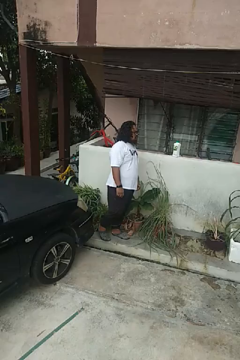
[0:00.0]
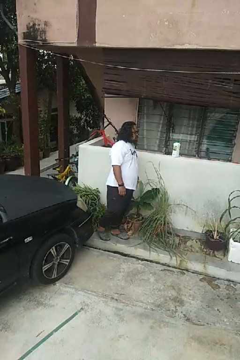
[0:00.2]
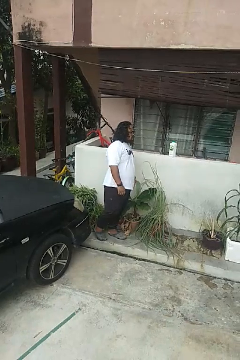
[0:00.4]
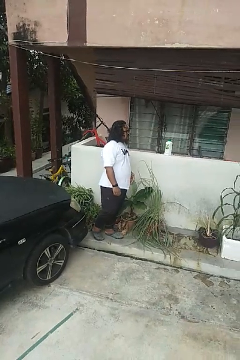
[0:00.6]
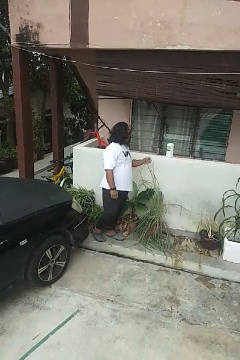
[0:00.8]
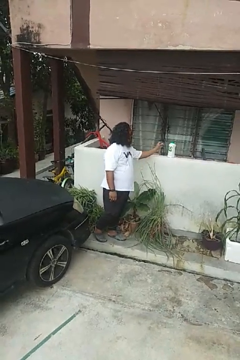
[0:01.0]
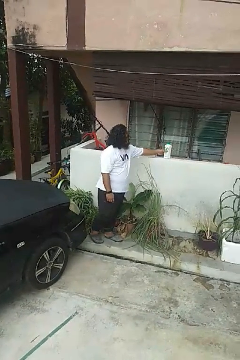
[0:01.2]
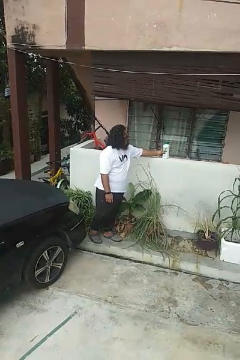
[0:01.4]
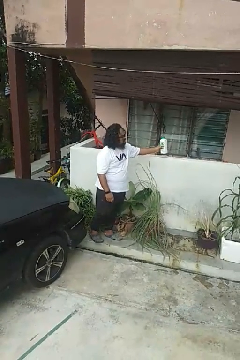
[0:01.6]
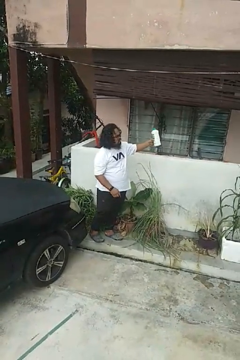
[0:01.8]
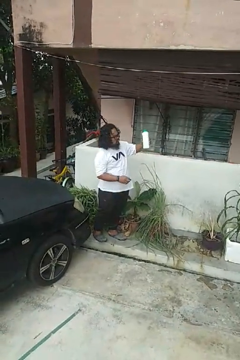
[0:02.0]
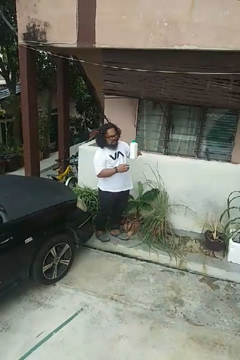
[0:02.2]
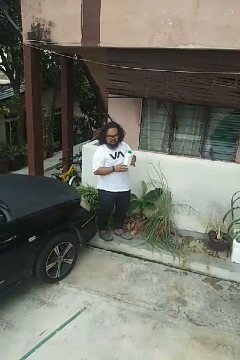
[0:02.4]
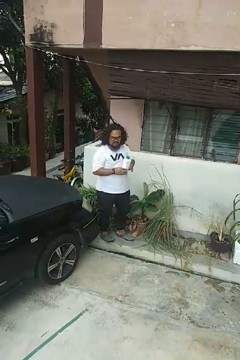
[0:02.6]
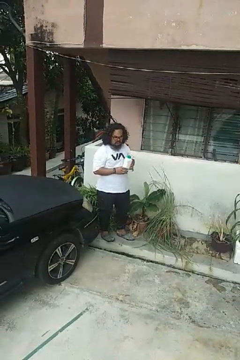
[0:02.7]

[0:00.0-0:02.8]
person picks up object from countertop

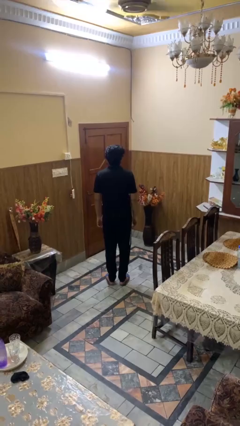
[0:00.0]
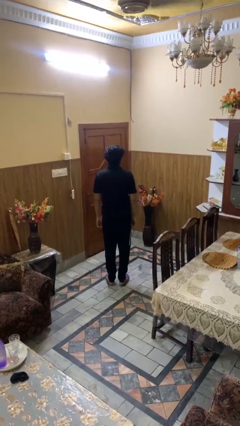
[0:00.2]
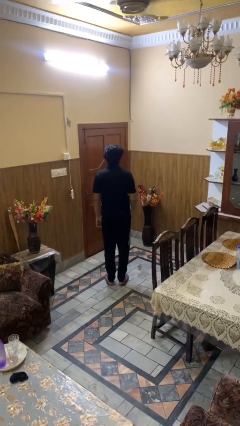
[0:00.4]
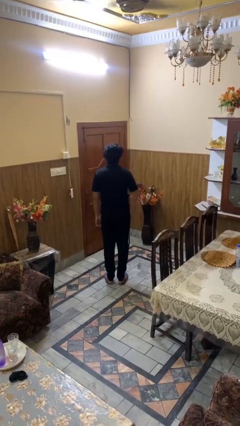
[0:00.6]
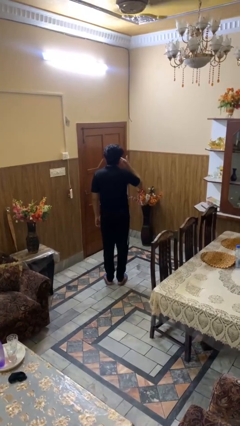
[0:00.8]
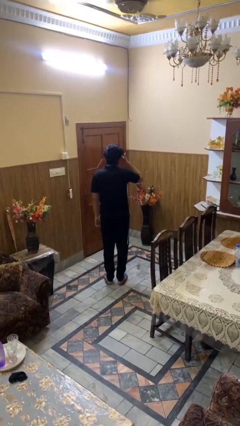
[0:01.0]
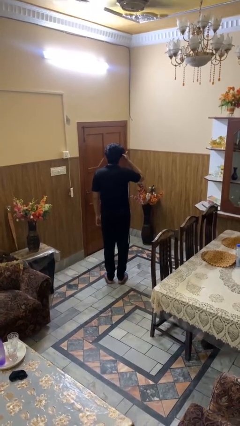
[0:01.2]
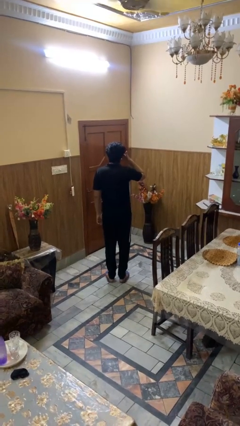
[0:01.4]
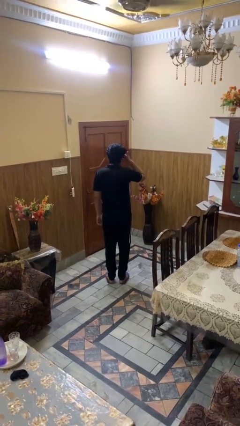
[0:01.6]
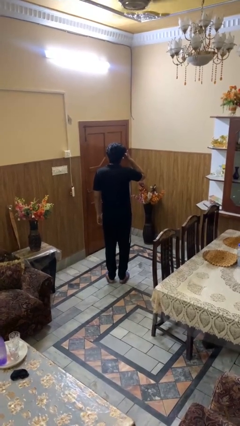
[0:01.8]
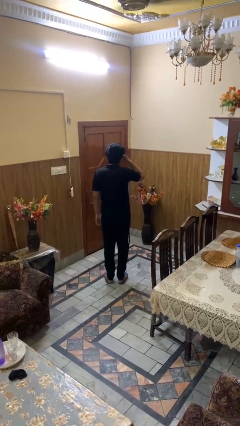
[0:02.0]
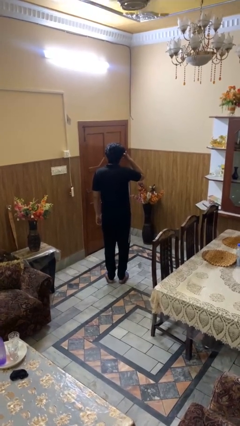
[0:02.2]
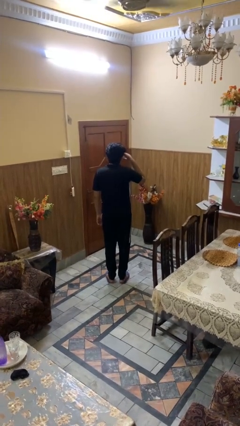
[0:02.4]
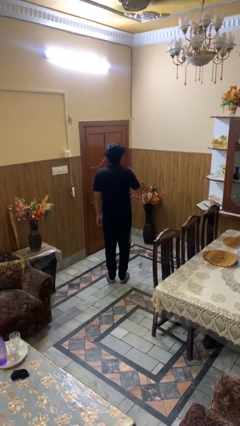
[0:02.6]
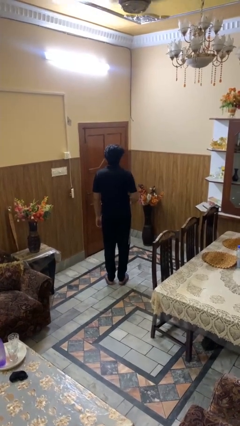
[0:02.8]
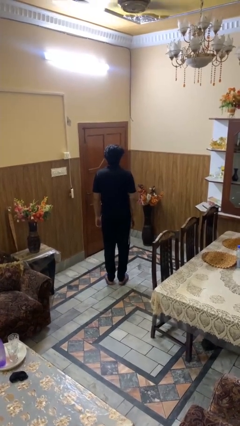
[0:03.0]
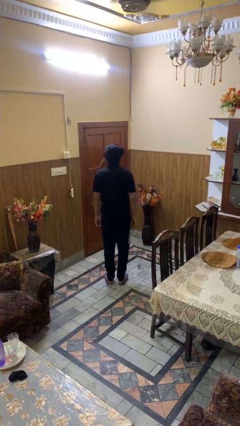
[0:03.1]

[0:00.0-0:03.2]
person rubs eyes

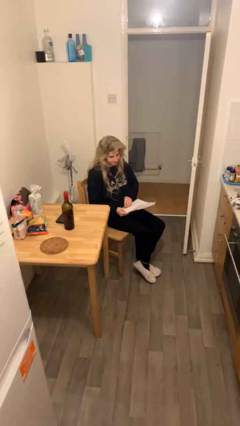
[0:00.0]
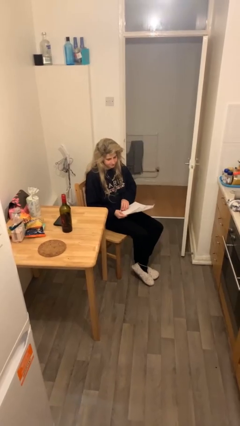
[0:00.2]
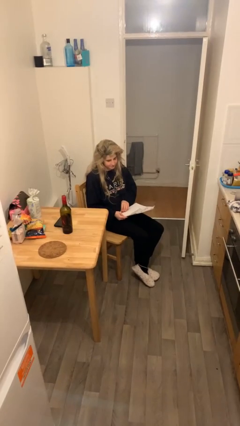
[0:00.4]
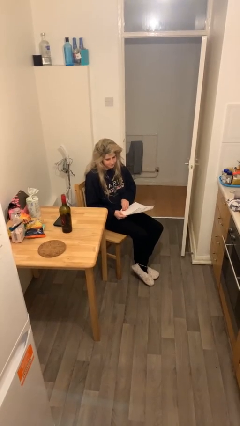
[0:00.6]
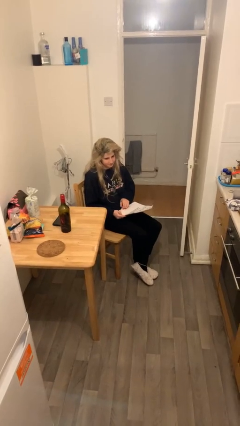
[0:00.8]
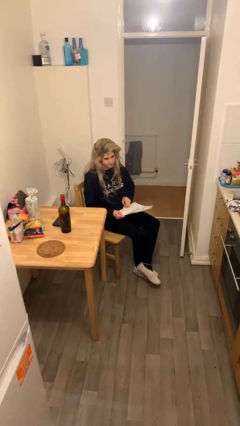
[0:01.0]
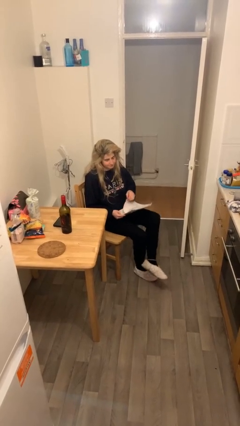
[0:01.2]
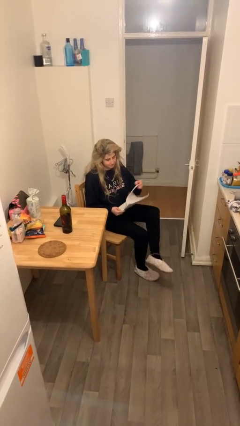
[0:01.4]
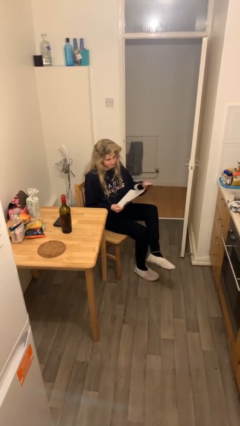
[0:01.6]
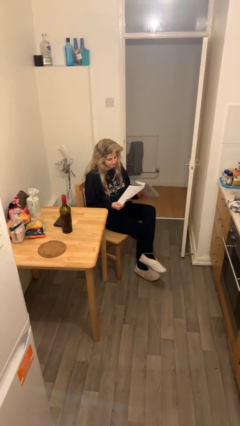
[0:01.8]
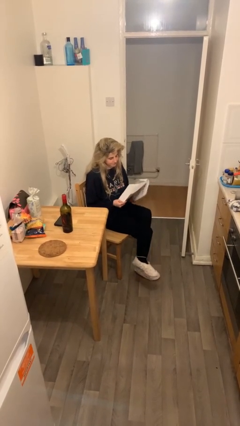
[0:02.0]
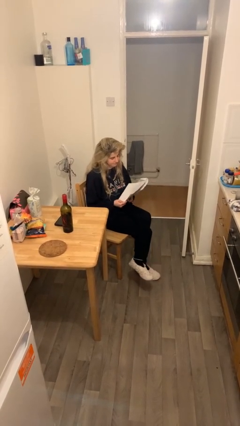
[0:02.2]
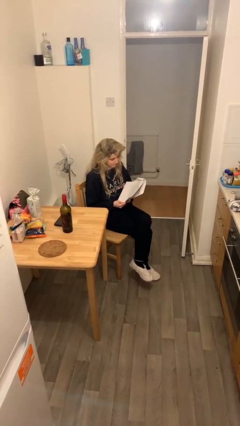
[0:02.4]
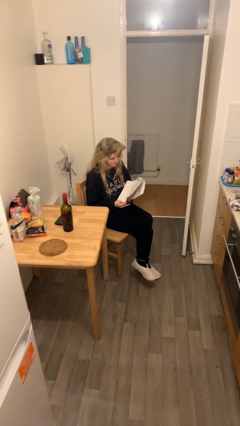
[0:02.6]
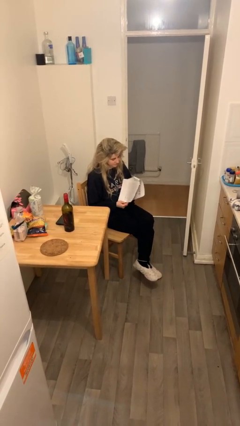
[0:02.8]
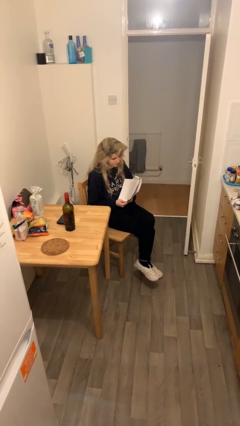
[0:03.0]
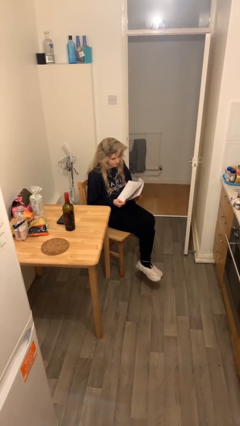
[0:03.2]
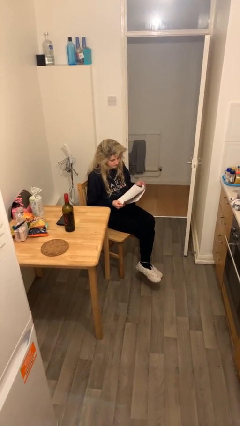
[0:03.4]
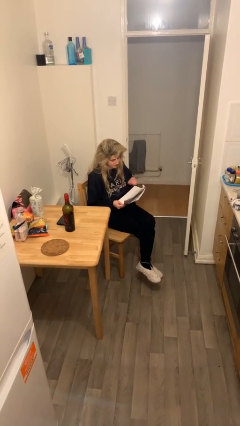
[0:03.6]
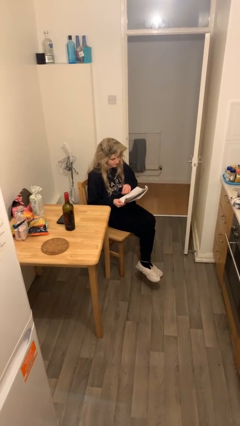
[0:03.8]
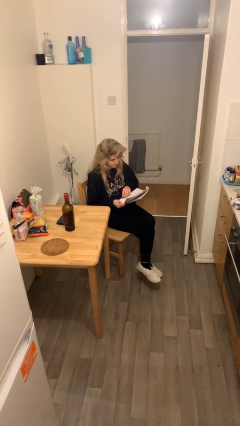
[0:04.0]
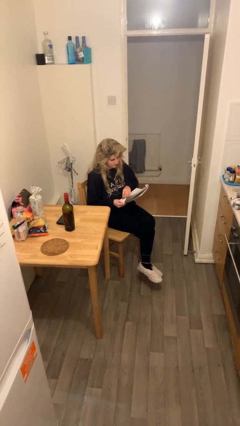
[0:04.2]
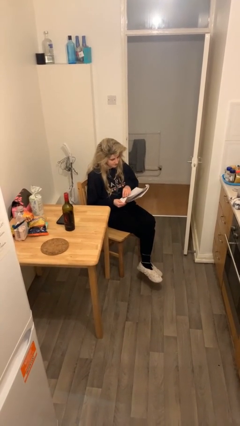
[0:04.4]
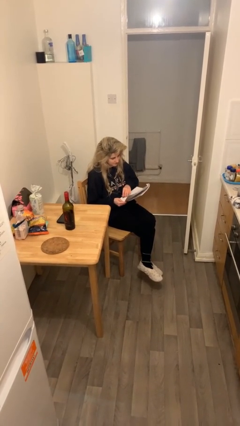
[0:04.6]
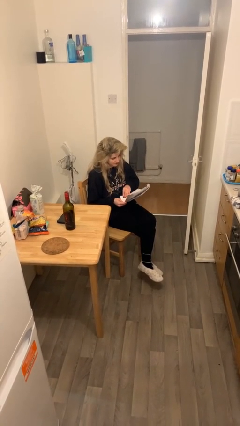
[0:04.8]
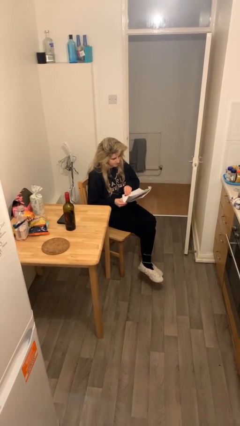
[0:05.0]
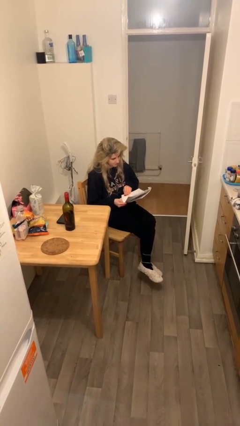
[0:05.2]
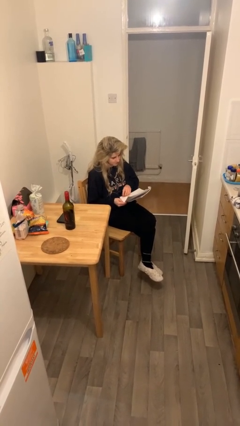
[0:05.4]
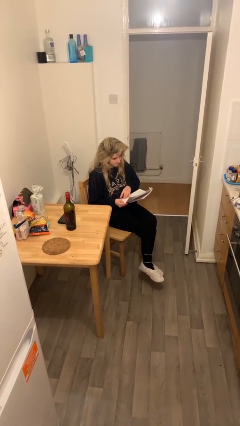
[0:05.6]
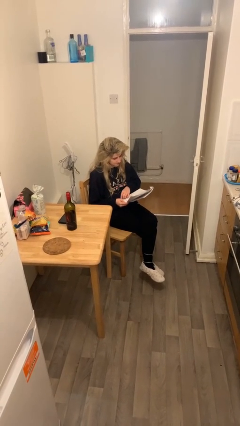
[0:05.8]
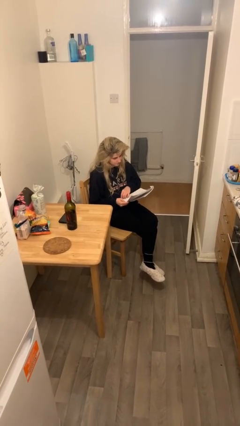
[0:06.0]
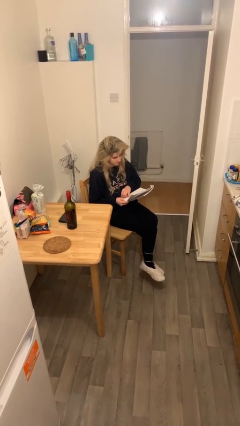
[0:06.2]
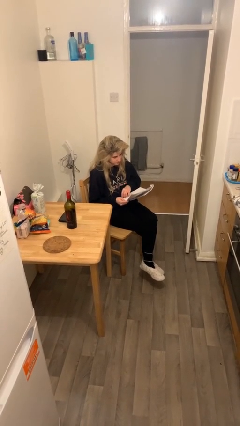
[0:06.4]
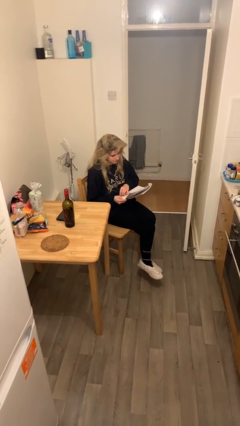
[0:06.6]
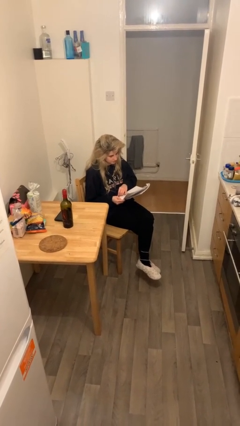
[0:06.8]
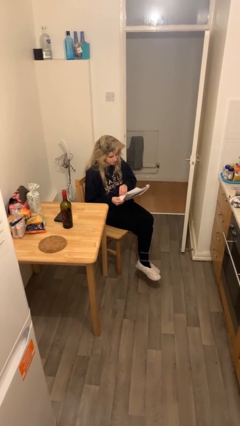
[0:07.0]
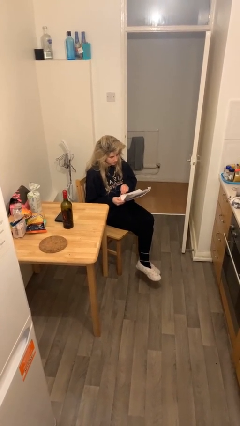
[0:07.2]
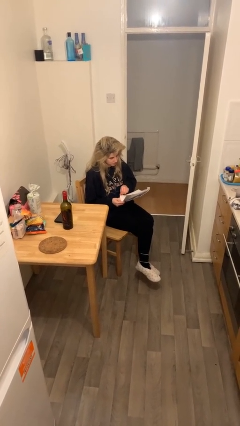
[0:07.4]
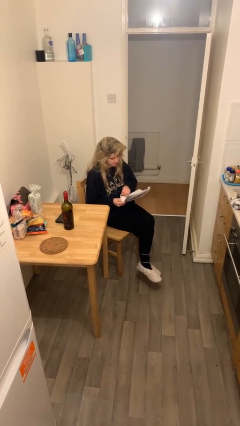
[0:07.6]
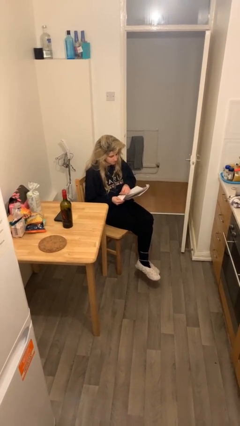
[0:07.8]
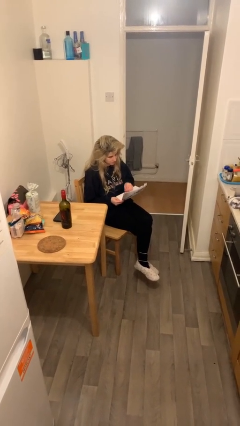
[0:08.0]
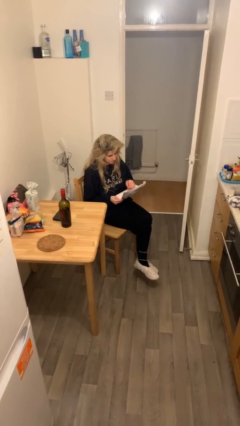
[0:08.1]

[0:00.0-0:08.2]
person reads document

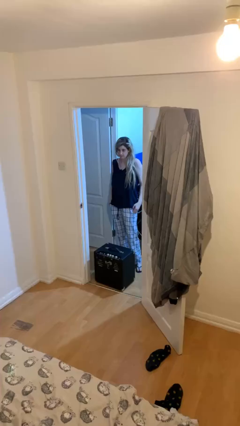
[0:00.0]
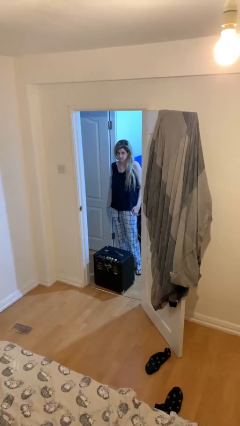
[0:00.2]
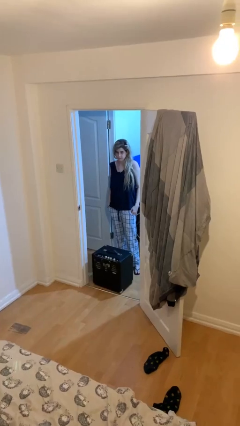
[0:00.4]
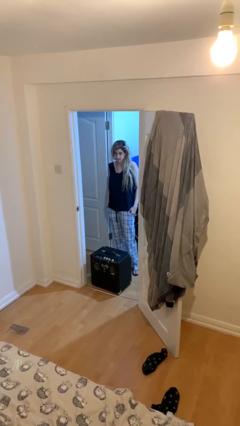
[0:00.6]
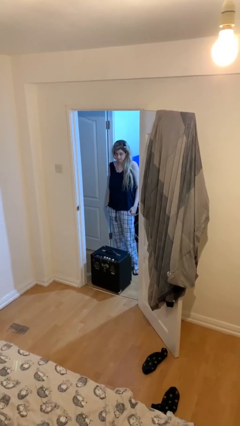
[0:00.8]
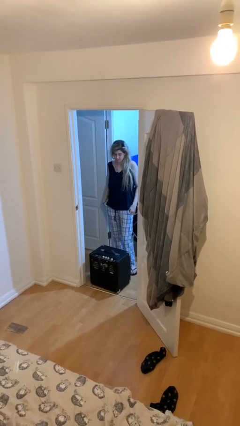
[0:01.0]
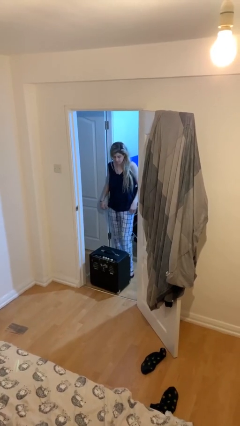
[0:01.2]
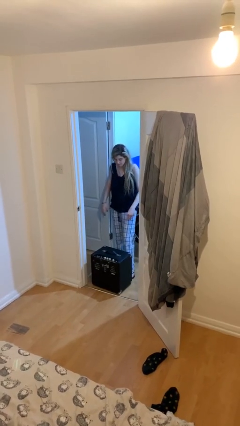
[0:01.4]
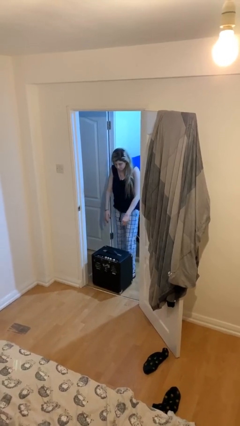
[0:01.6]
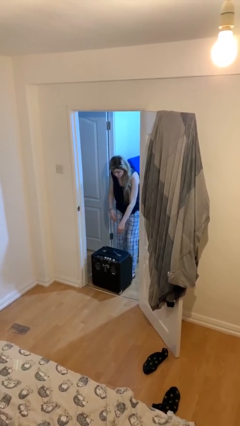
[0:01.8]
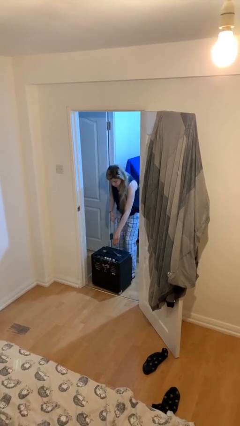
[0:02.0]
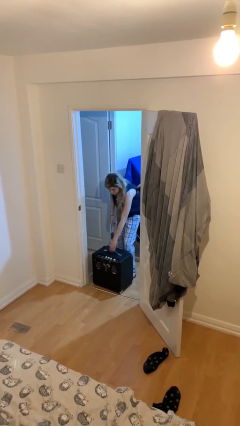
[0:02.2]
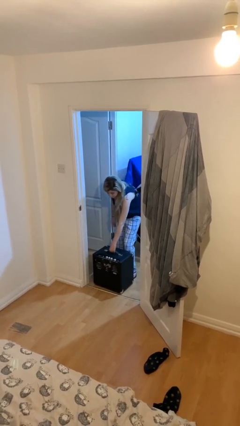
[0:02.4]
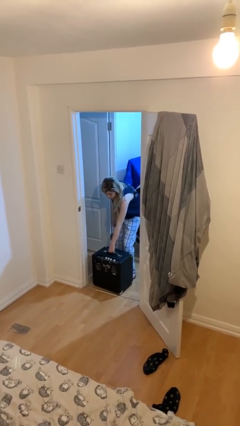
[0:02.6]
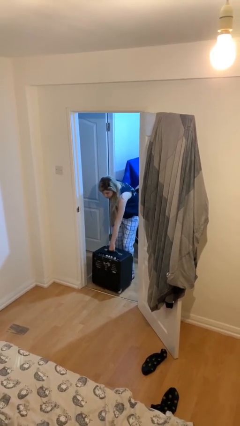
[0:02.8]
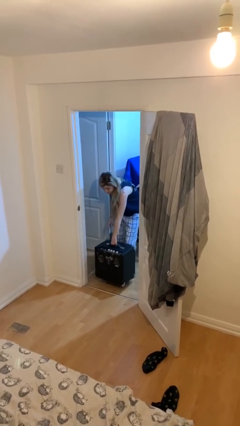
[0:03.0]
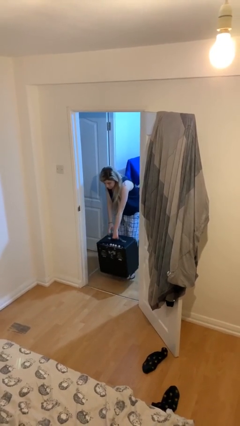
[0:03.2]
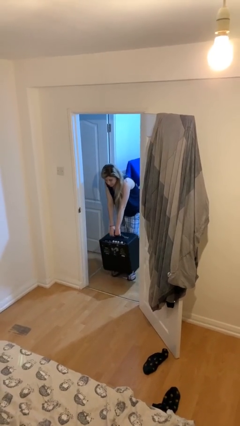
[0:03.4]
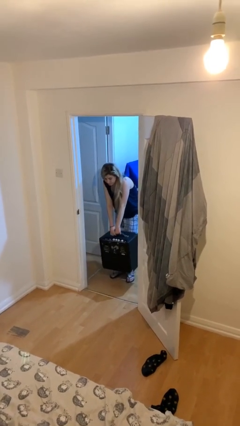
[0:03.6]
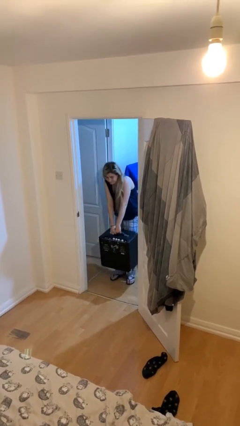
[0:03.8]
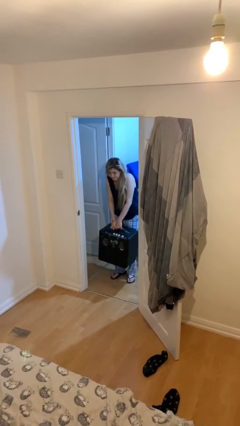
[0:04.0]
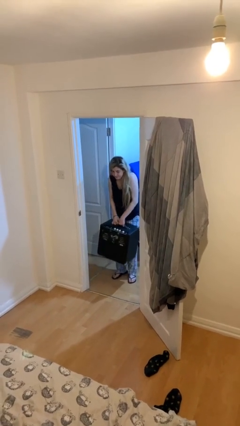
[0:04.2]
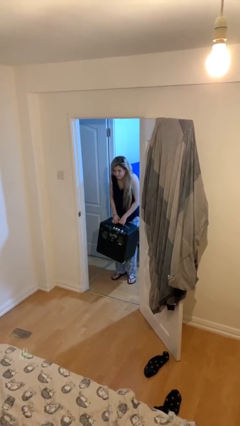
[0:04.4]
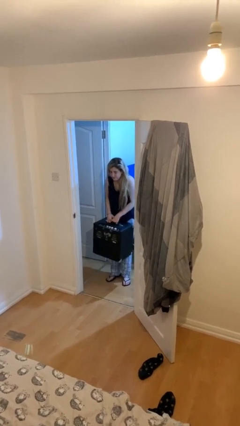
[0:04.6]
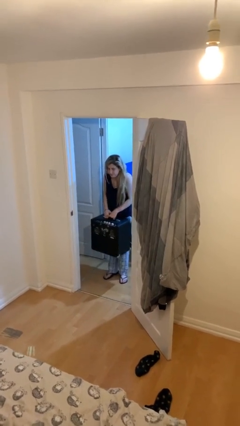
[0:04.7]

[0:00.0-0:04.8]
person picks up object from floor
